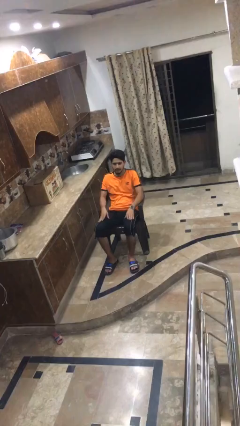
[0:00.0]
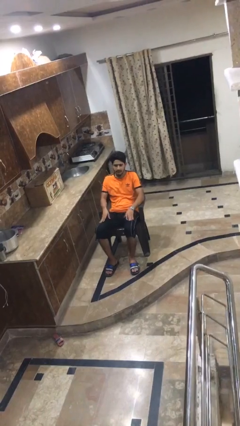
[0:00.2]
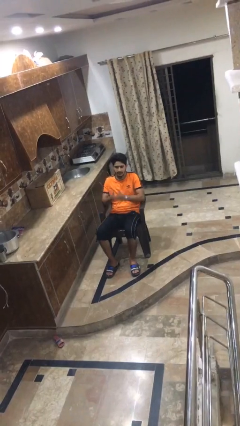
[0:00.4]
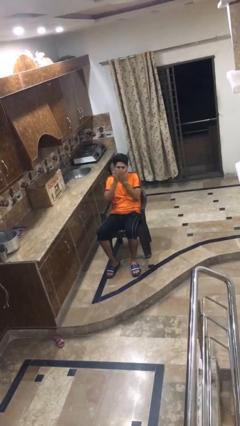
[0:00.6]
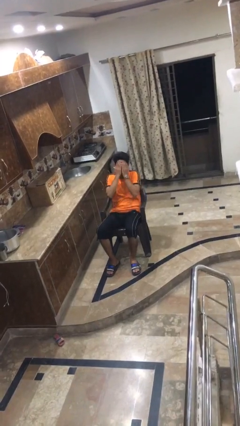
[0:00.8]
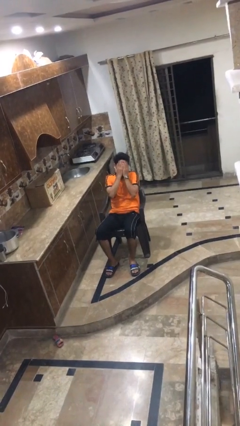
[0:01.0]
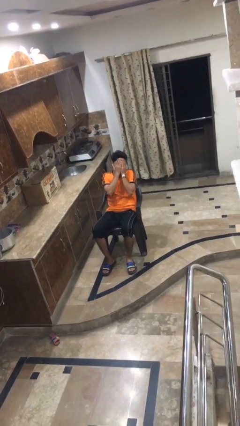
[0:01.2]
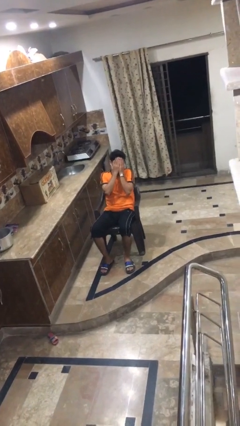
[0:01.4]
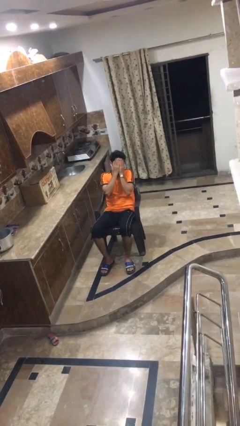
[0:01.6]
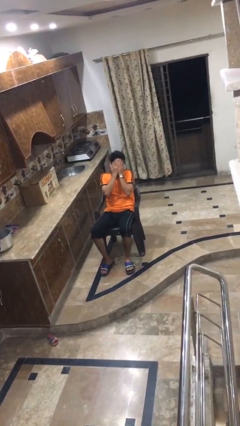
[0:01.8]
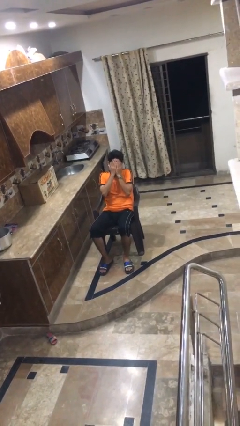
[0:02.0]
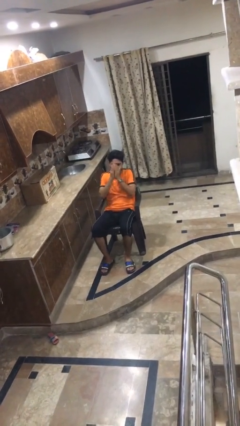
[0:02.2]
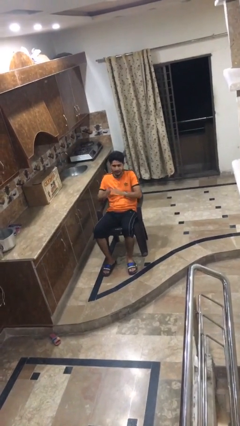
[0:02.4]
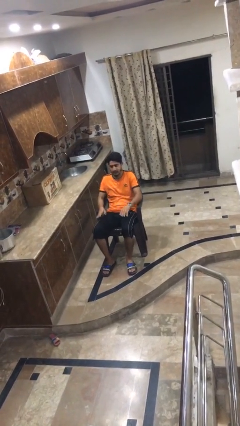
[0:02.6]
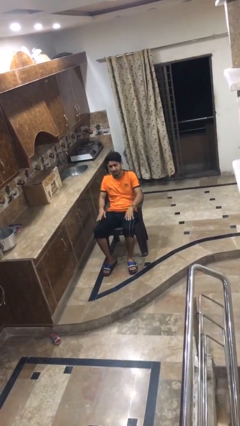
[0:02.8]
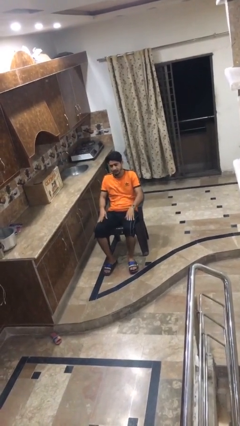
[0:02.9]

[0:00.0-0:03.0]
person covers face with hands

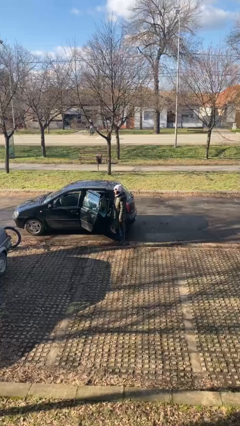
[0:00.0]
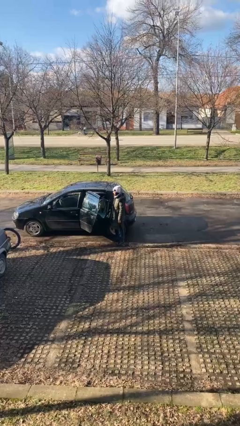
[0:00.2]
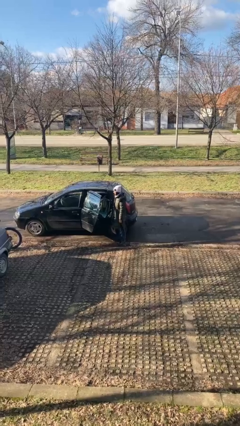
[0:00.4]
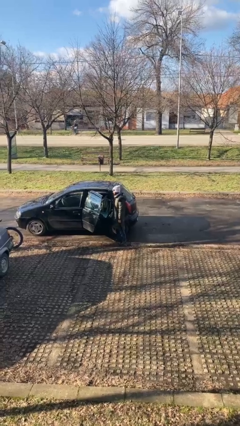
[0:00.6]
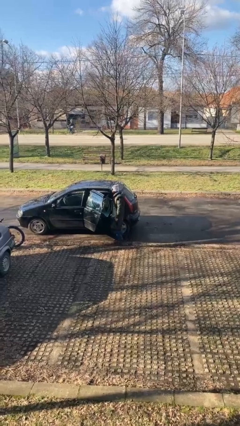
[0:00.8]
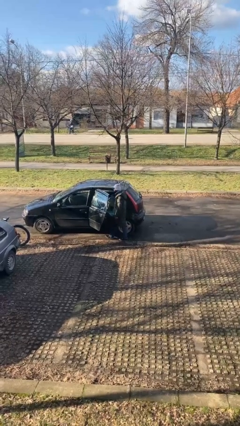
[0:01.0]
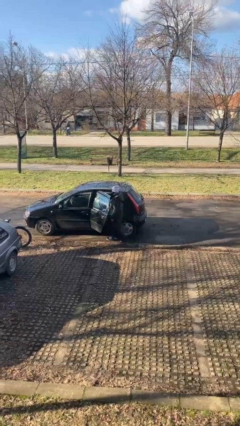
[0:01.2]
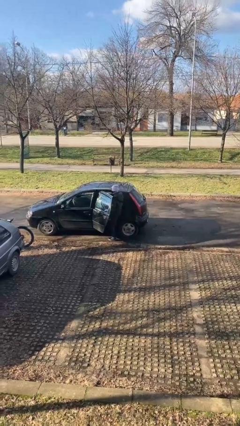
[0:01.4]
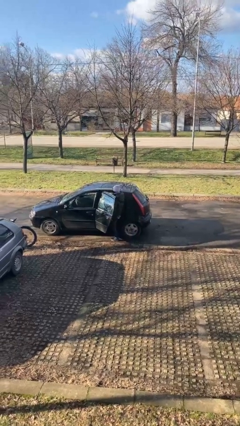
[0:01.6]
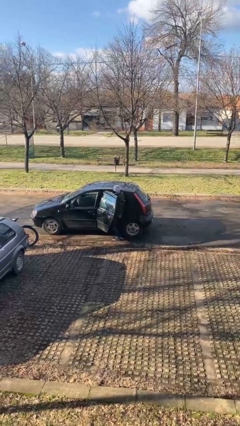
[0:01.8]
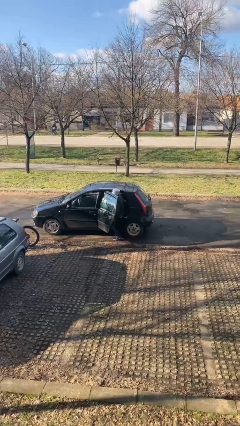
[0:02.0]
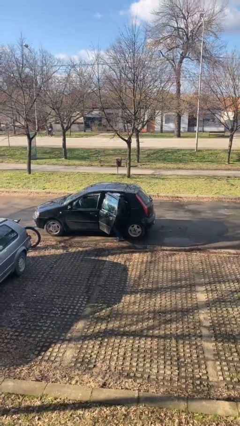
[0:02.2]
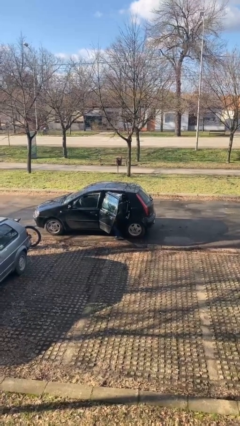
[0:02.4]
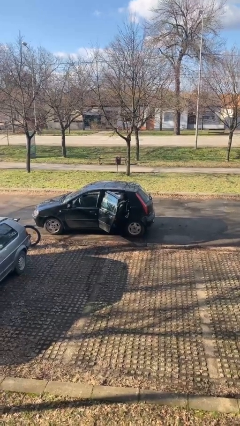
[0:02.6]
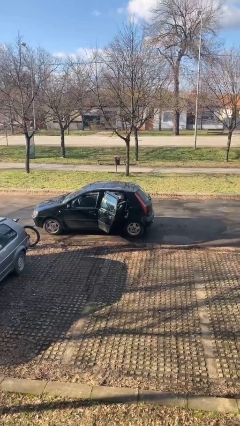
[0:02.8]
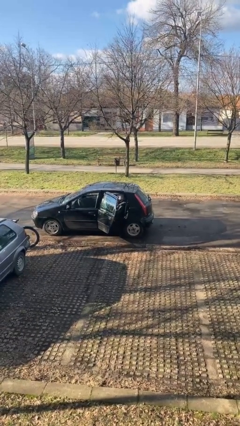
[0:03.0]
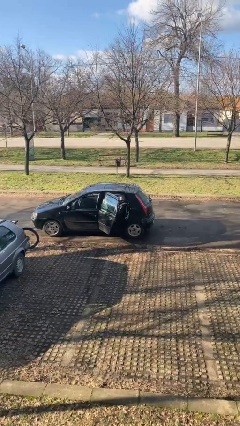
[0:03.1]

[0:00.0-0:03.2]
person enters car

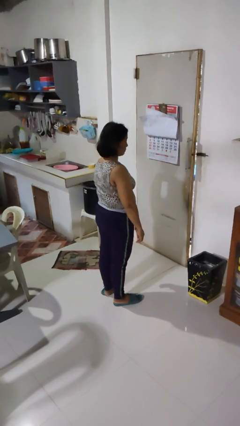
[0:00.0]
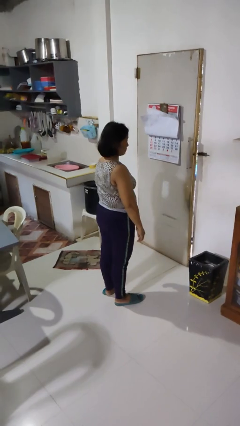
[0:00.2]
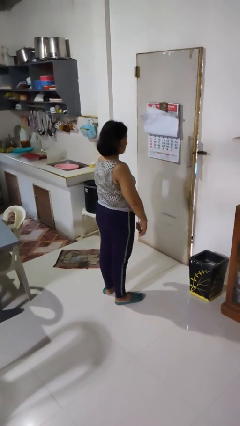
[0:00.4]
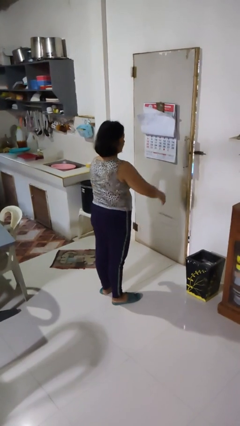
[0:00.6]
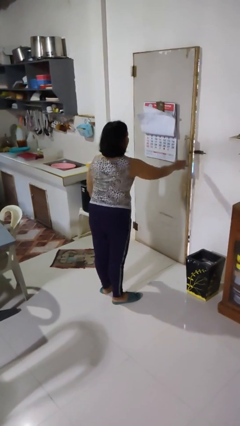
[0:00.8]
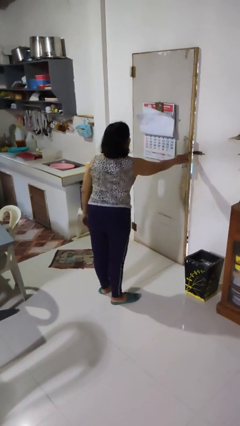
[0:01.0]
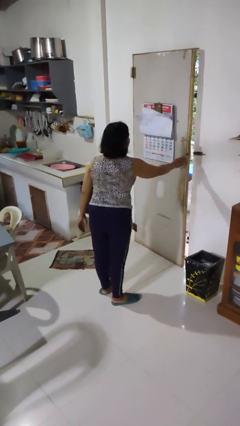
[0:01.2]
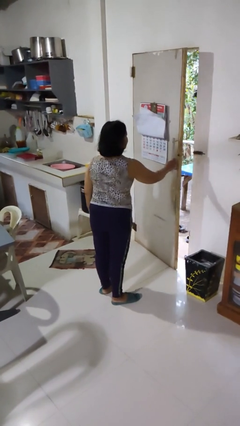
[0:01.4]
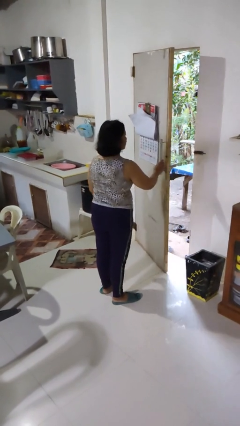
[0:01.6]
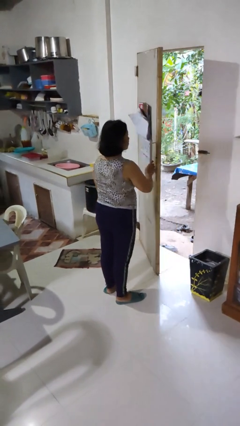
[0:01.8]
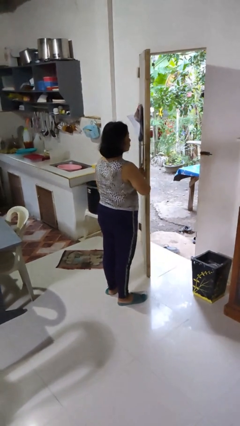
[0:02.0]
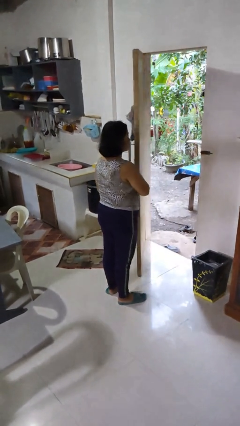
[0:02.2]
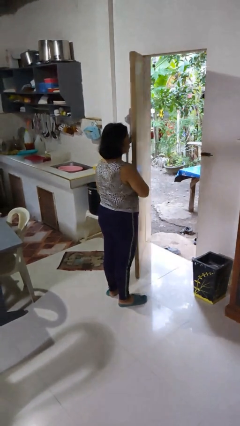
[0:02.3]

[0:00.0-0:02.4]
person opens facility door

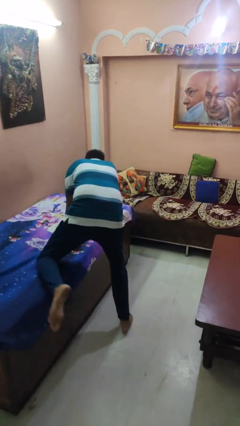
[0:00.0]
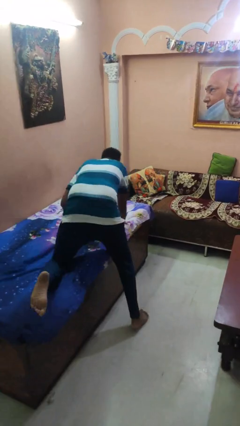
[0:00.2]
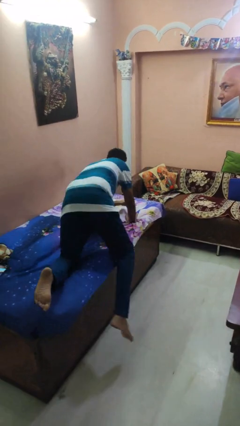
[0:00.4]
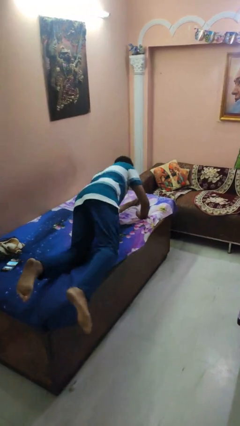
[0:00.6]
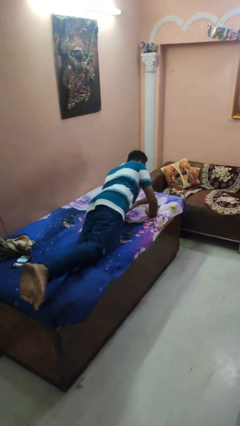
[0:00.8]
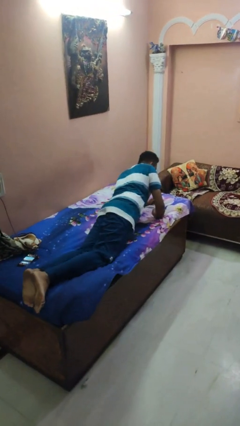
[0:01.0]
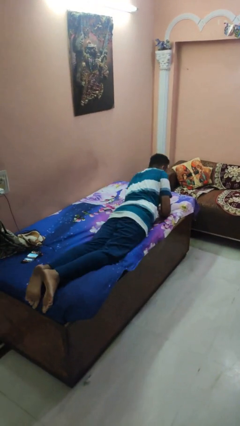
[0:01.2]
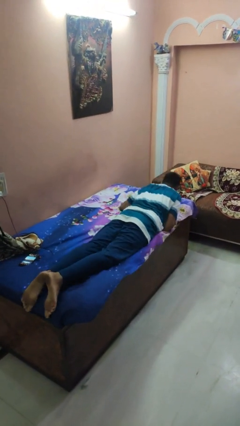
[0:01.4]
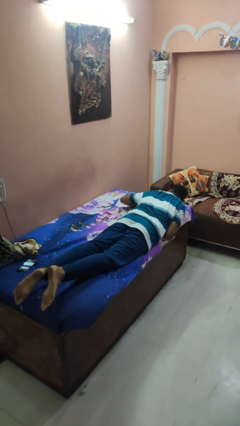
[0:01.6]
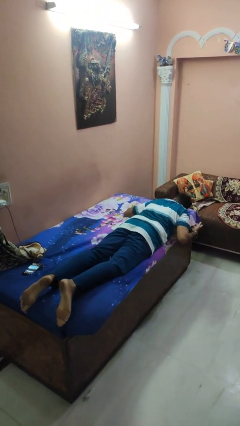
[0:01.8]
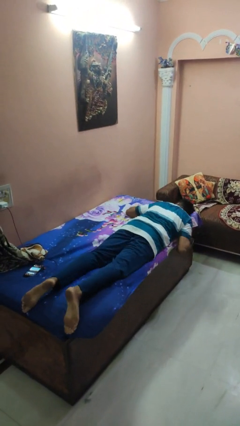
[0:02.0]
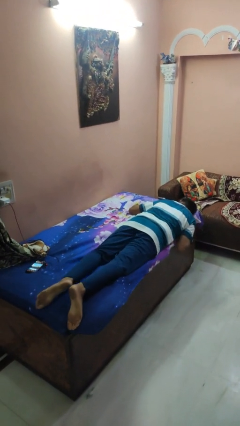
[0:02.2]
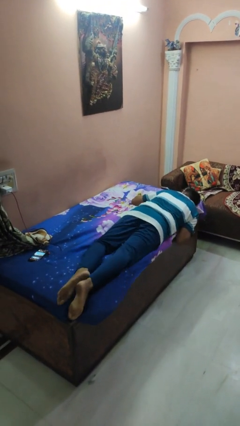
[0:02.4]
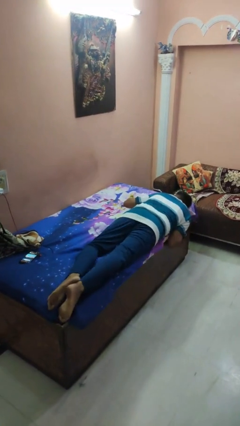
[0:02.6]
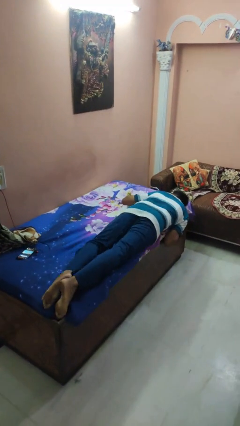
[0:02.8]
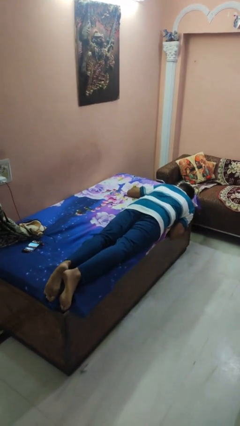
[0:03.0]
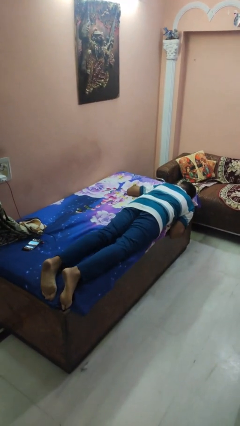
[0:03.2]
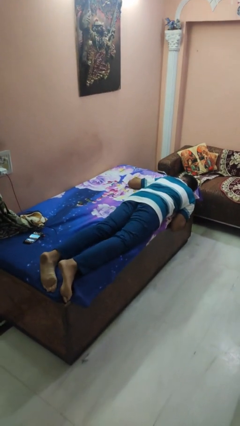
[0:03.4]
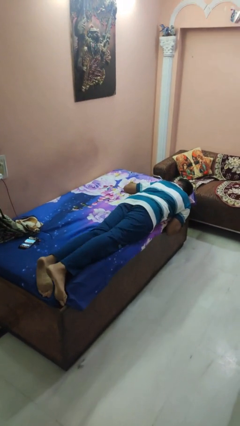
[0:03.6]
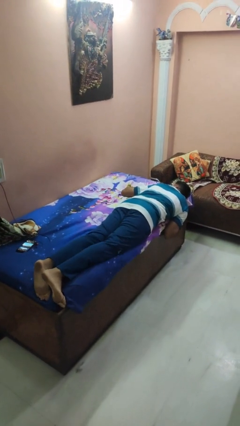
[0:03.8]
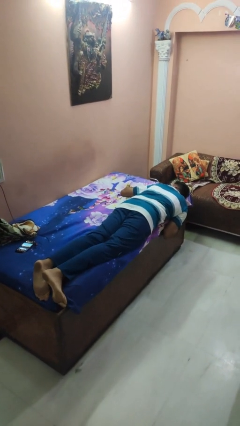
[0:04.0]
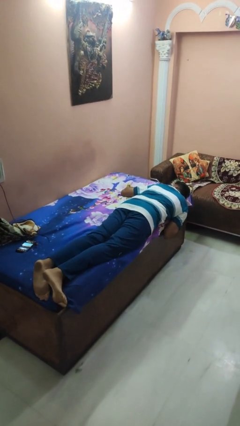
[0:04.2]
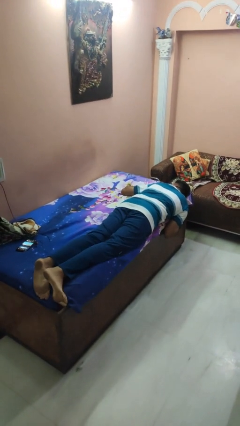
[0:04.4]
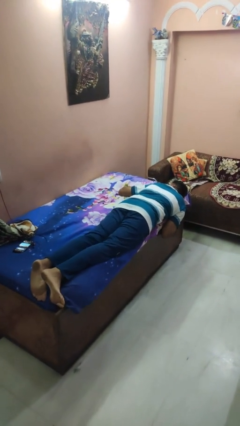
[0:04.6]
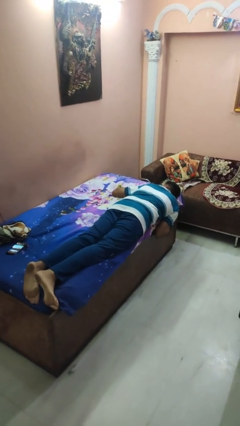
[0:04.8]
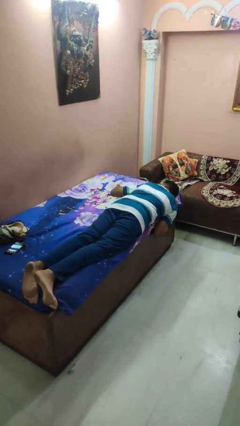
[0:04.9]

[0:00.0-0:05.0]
person lies down on bed

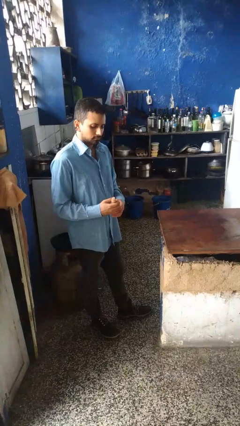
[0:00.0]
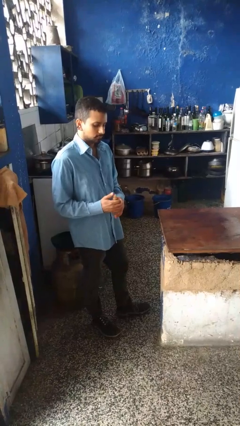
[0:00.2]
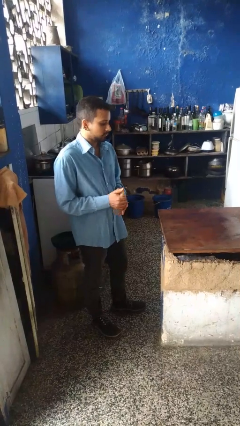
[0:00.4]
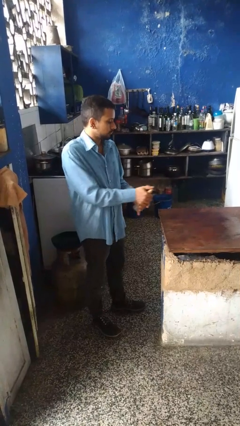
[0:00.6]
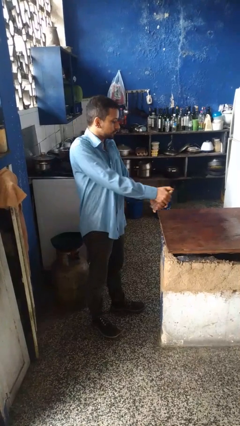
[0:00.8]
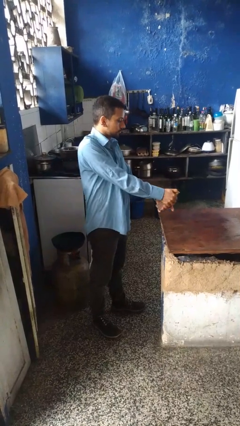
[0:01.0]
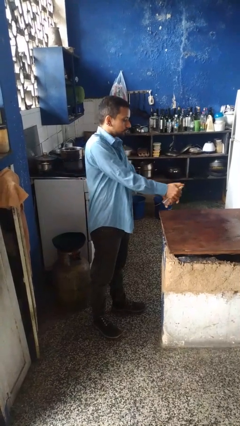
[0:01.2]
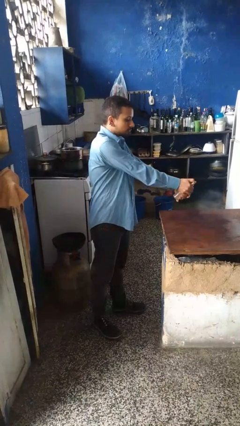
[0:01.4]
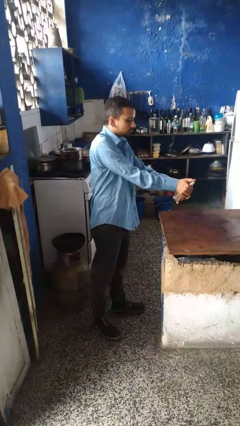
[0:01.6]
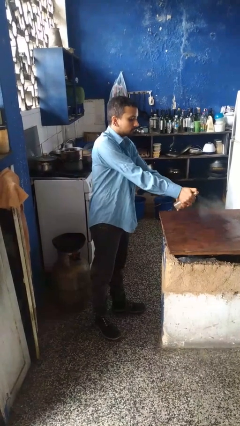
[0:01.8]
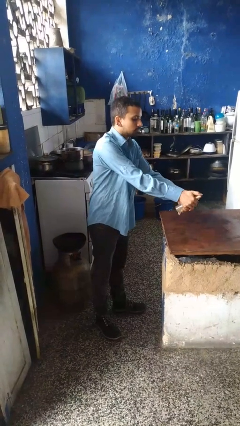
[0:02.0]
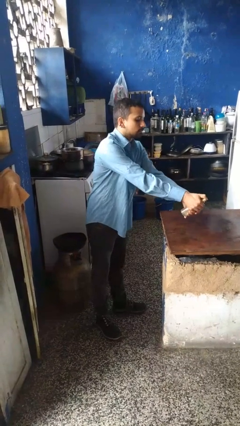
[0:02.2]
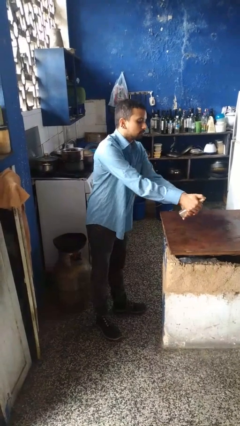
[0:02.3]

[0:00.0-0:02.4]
person sprays from bottle

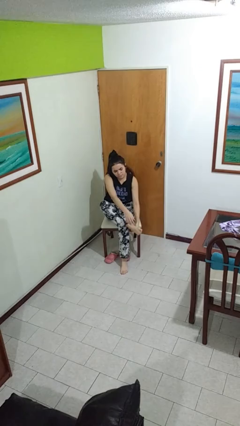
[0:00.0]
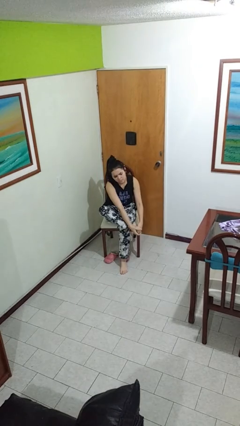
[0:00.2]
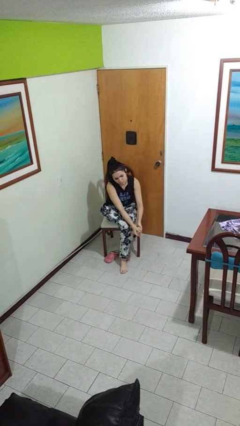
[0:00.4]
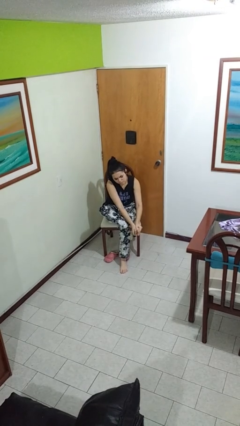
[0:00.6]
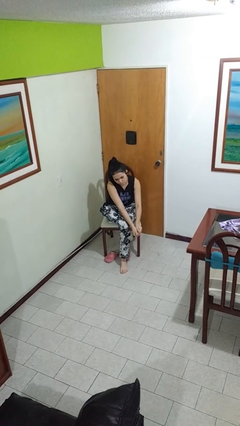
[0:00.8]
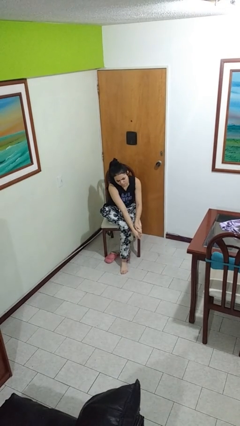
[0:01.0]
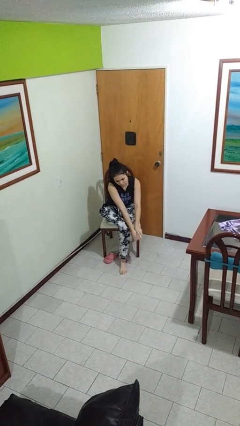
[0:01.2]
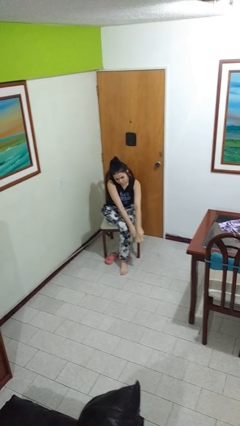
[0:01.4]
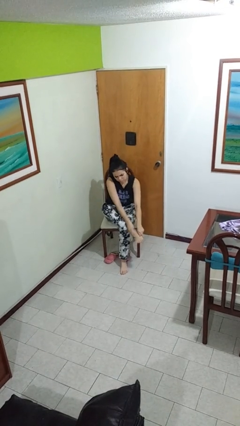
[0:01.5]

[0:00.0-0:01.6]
person rubs foot
